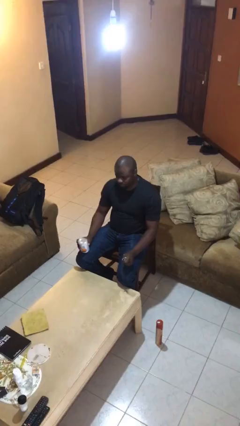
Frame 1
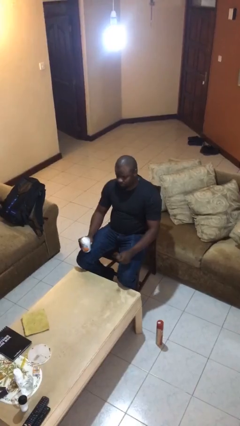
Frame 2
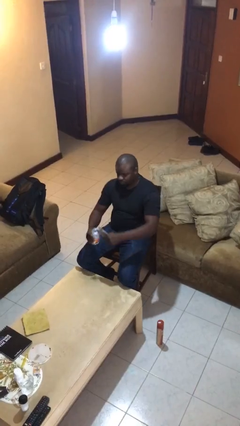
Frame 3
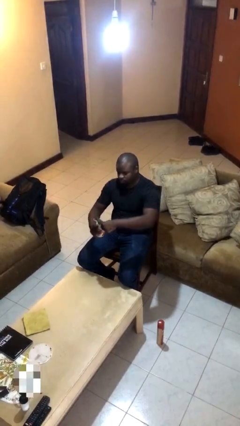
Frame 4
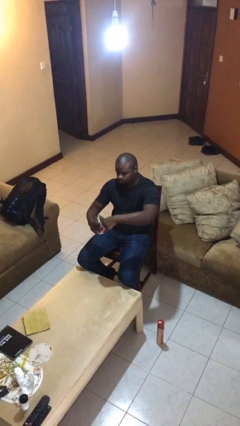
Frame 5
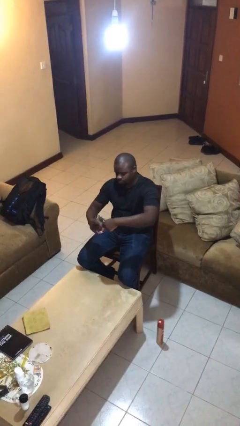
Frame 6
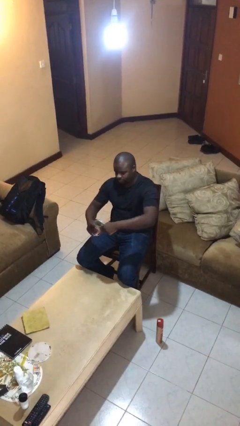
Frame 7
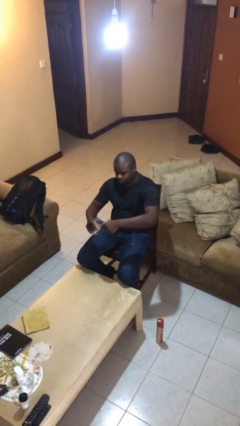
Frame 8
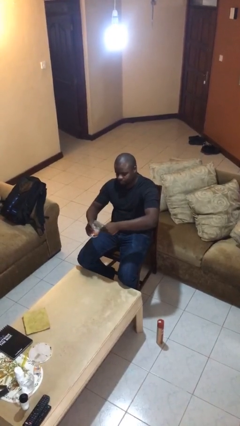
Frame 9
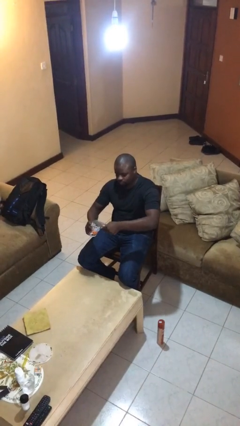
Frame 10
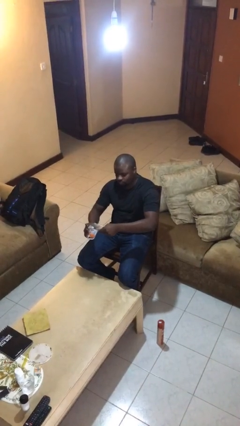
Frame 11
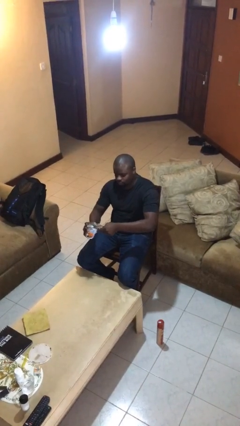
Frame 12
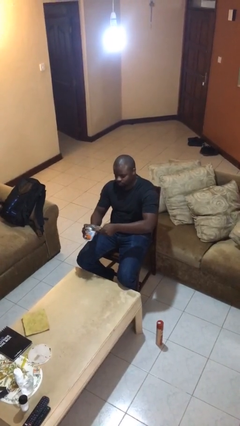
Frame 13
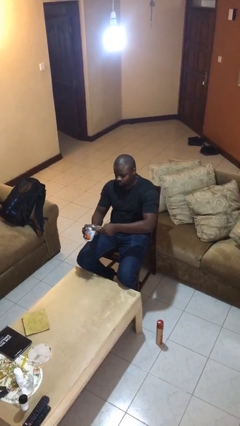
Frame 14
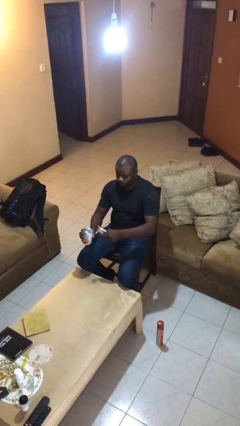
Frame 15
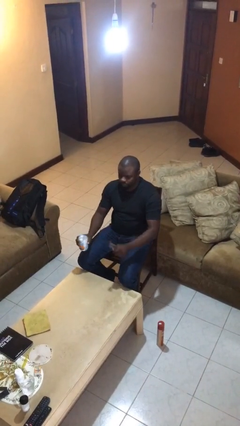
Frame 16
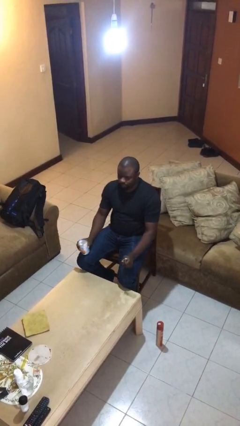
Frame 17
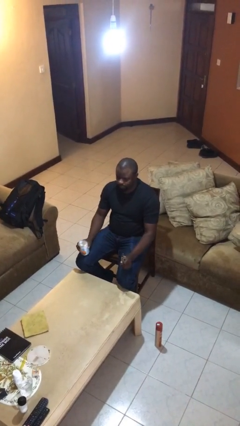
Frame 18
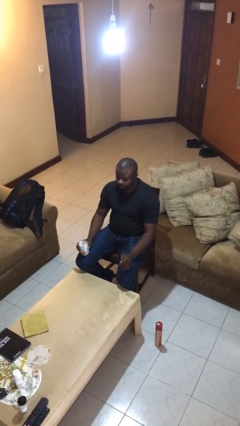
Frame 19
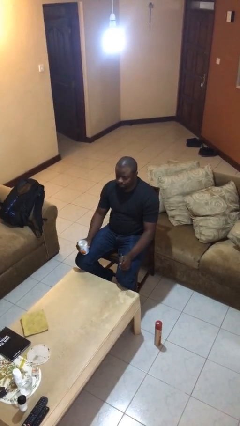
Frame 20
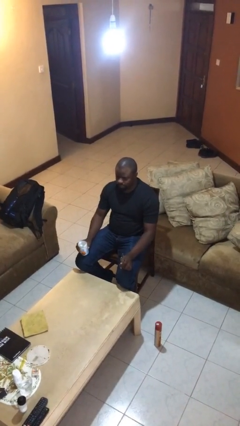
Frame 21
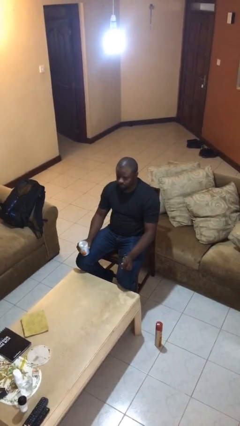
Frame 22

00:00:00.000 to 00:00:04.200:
person opens can with can opener

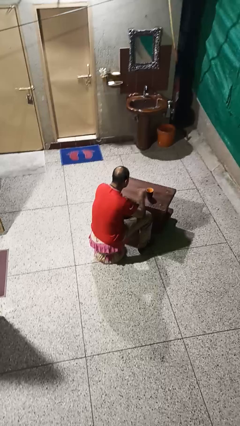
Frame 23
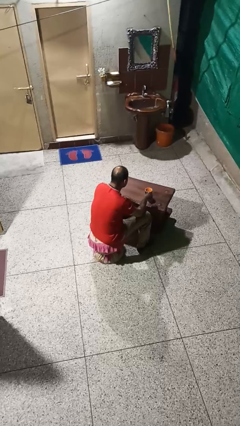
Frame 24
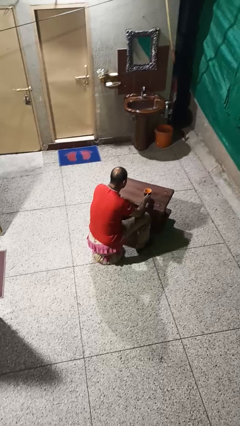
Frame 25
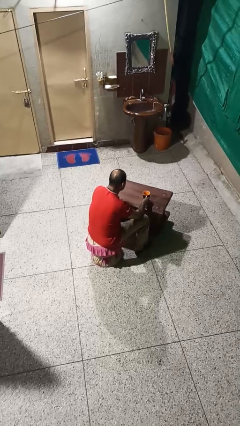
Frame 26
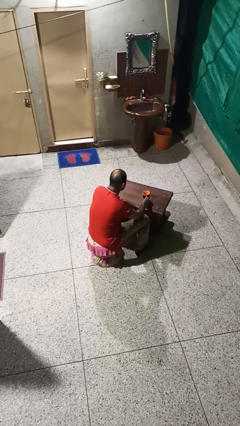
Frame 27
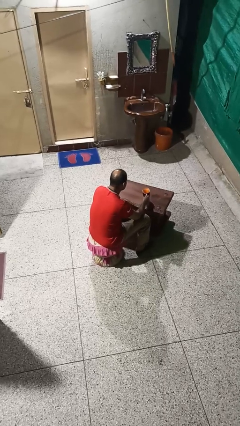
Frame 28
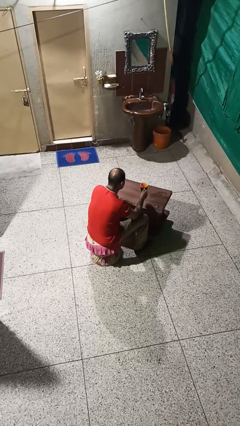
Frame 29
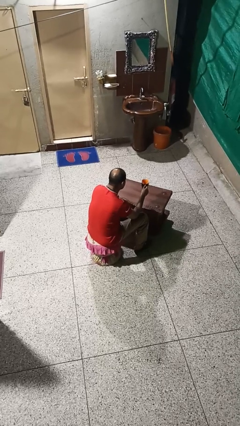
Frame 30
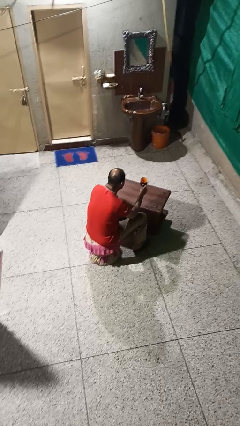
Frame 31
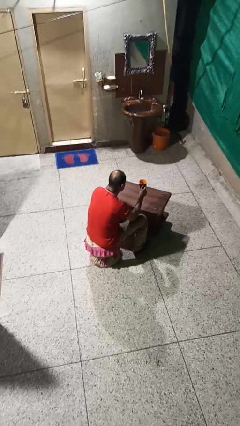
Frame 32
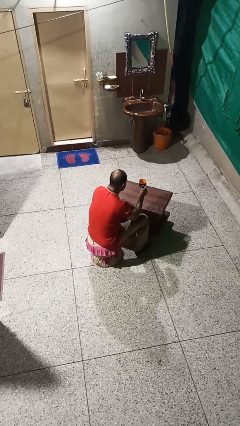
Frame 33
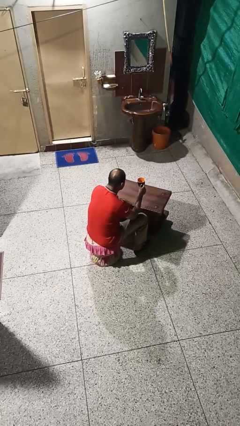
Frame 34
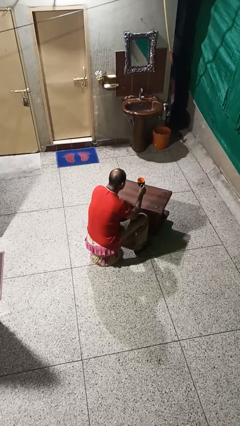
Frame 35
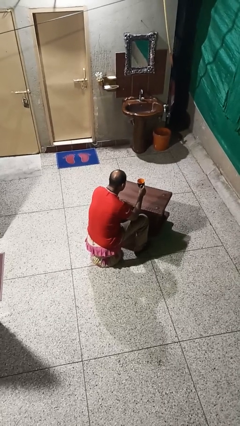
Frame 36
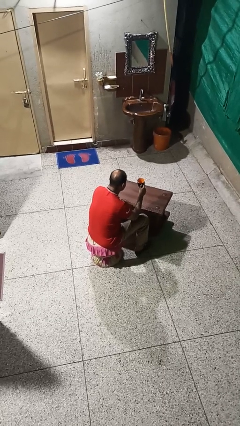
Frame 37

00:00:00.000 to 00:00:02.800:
person picks up object from table

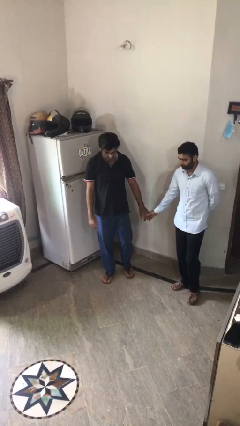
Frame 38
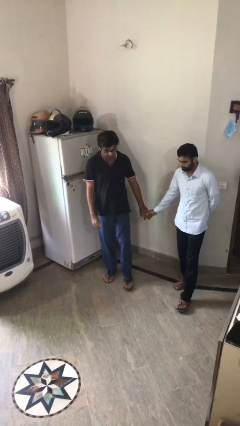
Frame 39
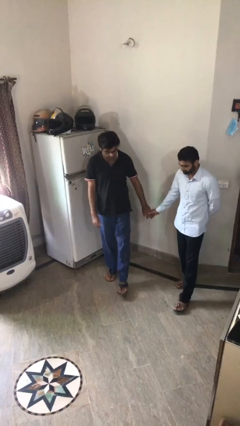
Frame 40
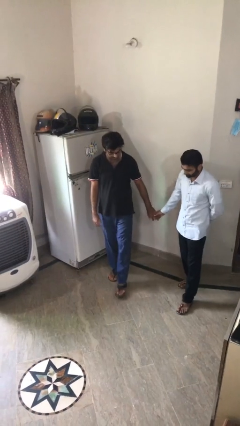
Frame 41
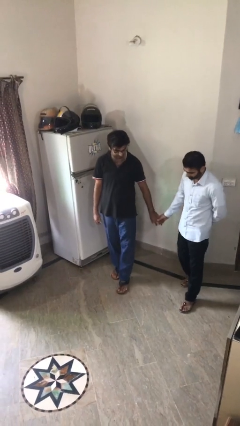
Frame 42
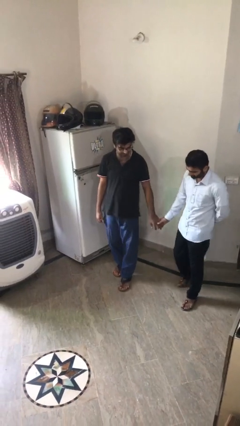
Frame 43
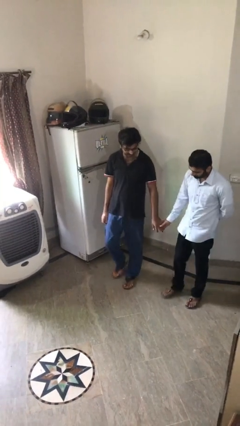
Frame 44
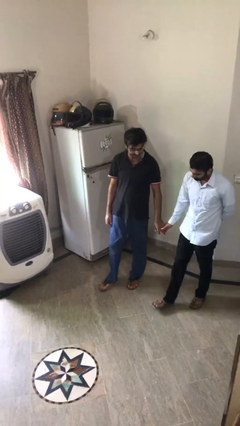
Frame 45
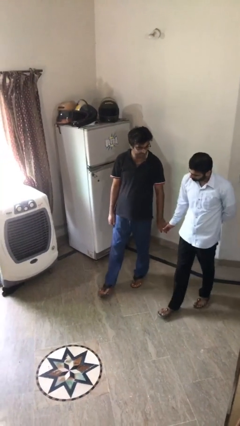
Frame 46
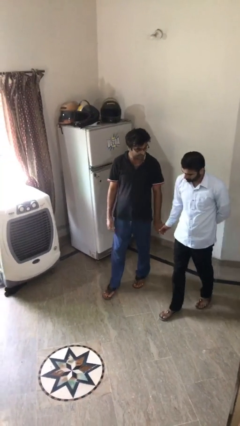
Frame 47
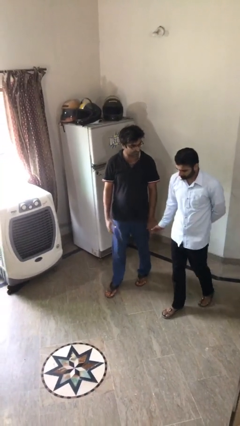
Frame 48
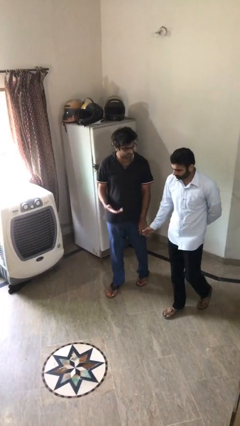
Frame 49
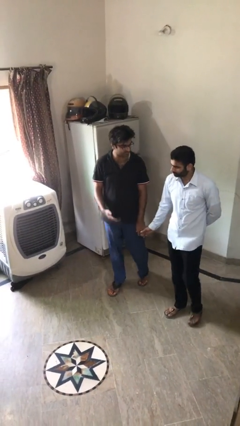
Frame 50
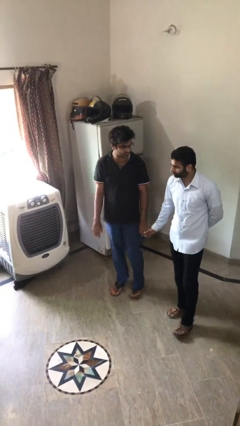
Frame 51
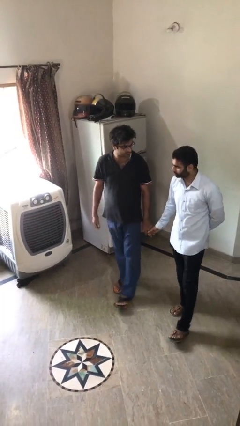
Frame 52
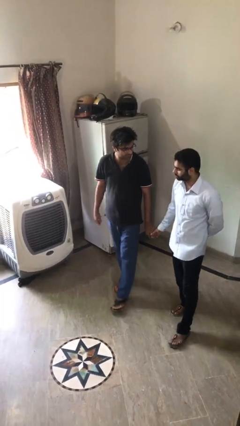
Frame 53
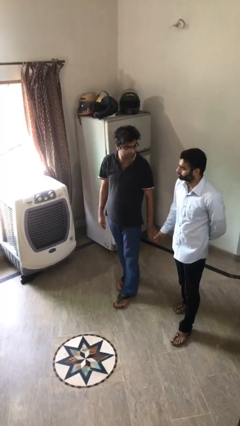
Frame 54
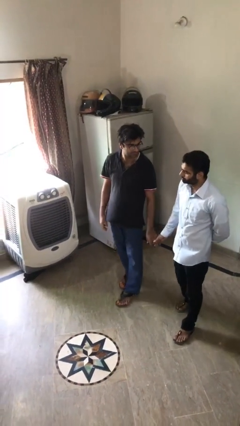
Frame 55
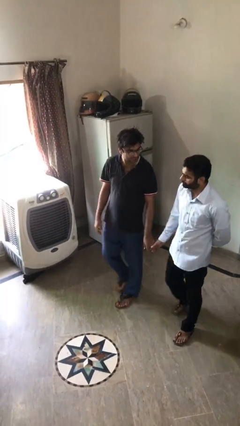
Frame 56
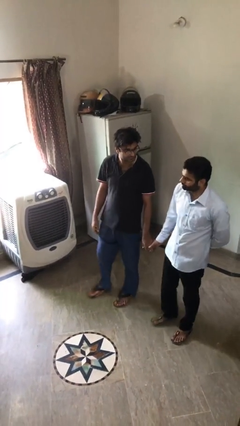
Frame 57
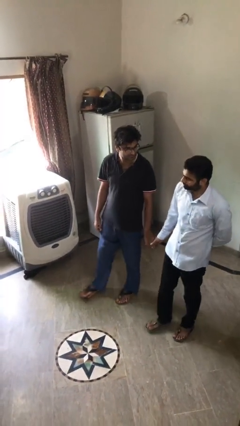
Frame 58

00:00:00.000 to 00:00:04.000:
person holds hand

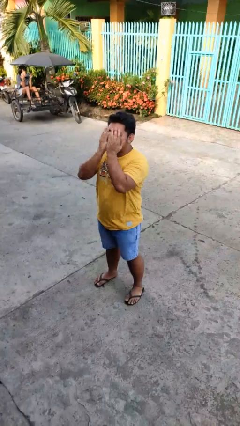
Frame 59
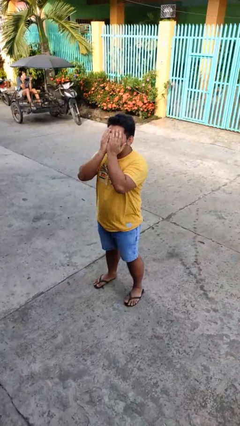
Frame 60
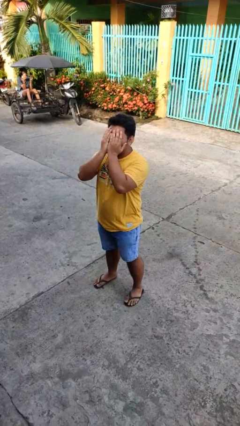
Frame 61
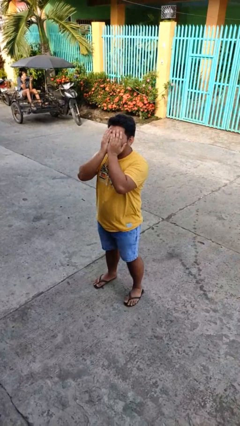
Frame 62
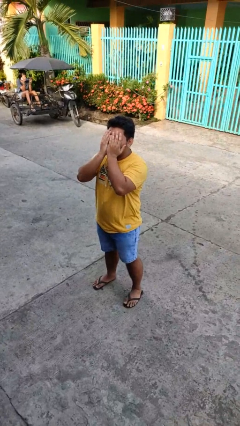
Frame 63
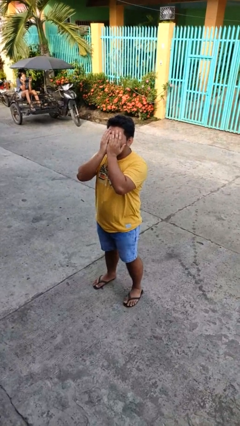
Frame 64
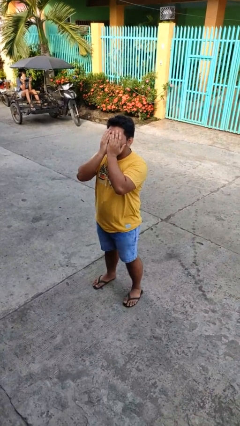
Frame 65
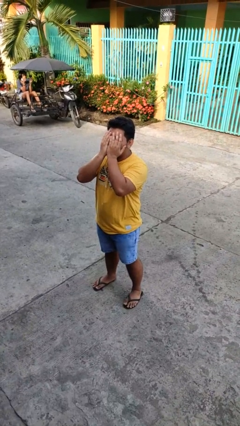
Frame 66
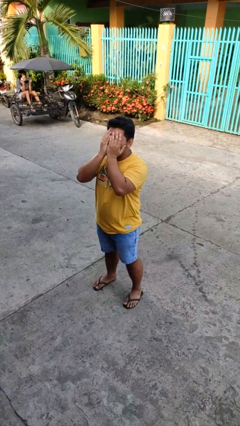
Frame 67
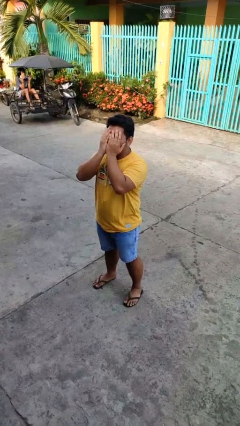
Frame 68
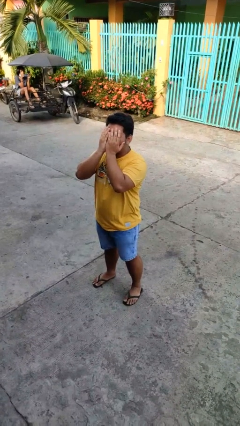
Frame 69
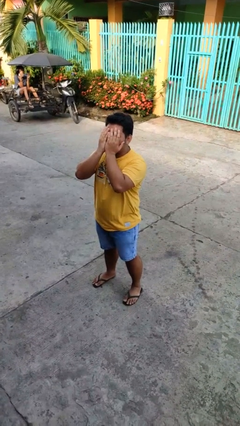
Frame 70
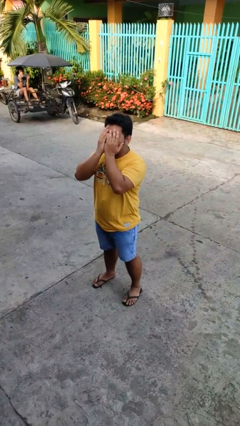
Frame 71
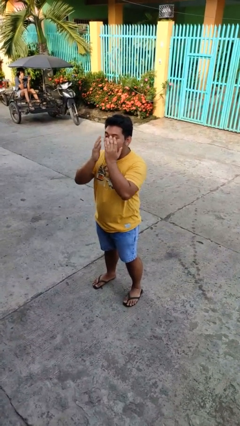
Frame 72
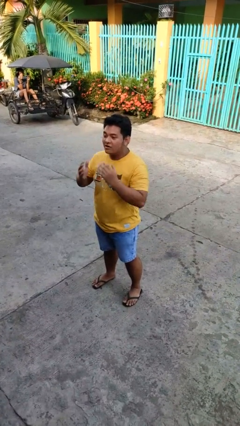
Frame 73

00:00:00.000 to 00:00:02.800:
person covers face with hands

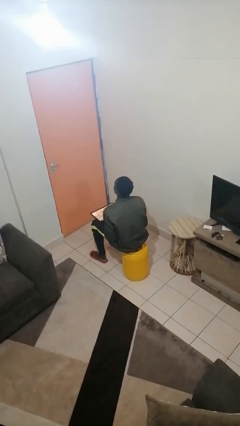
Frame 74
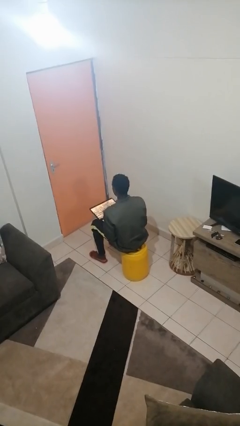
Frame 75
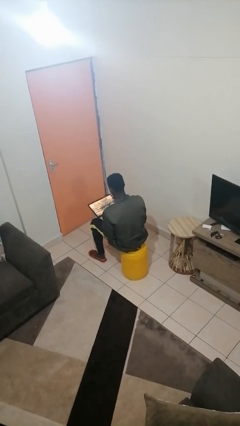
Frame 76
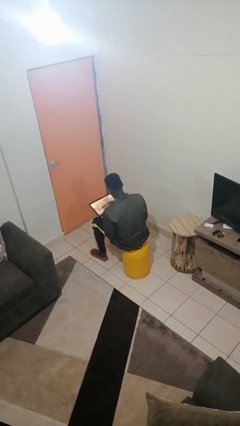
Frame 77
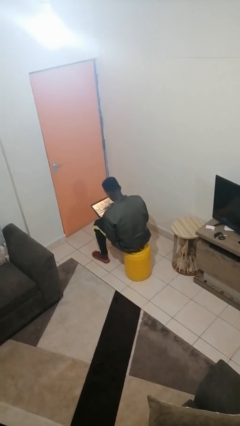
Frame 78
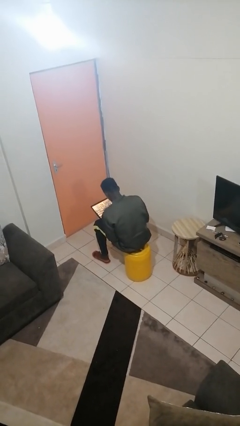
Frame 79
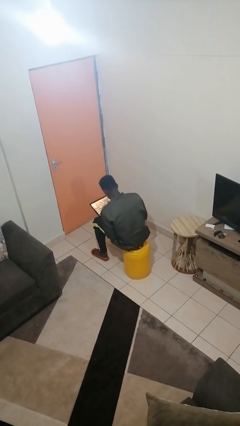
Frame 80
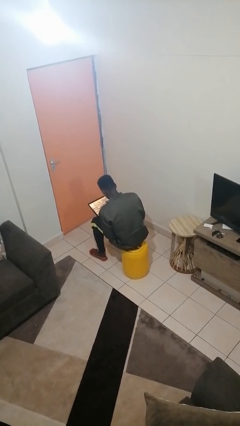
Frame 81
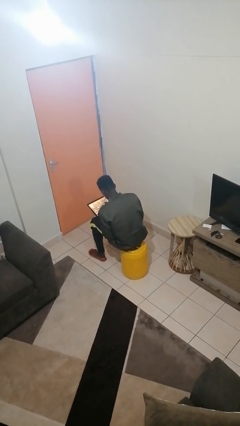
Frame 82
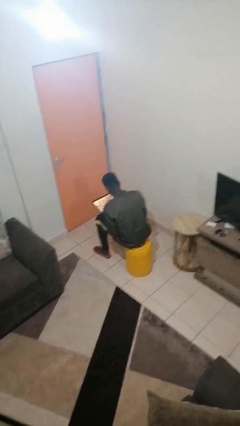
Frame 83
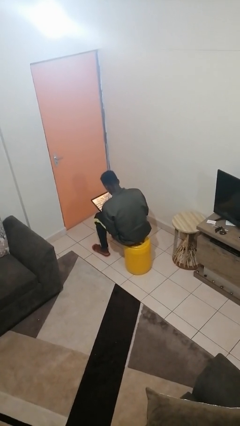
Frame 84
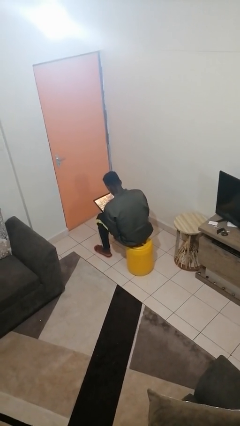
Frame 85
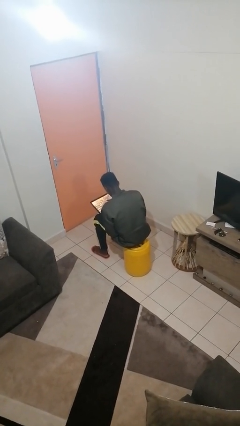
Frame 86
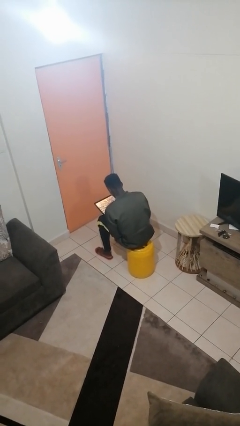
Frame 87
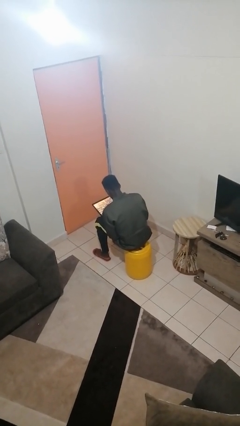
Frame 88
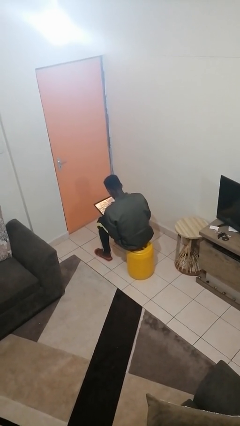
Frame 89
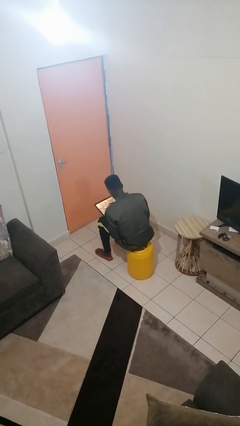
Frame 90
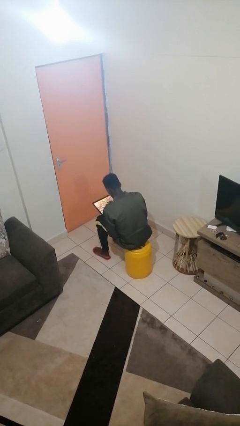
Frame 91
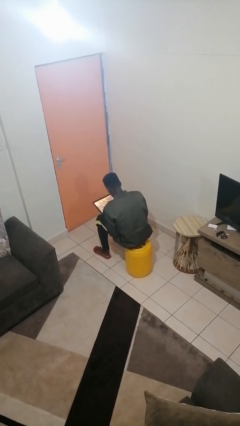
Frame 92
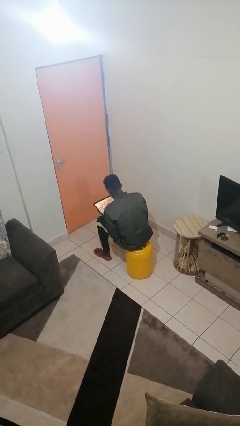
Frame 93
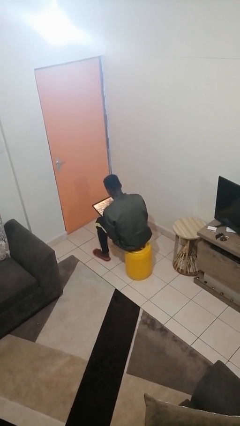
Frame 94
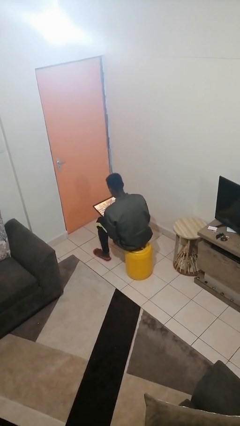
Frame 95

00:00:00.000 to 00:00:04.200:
person interacts with tablet
